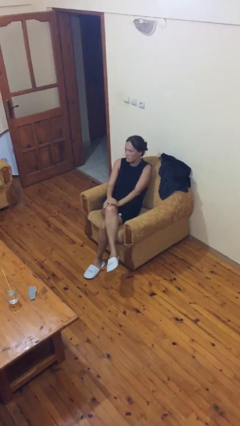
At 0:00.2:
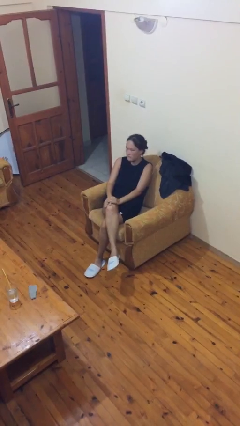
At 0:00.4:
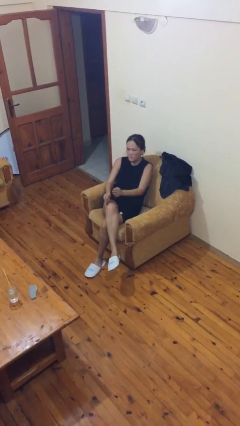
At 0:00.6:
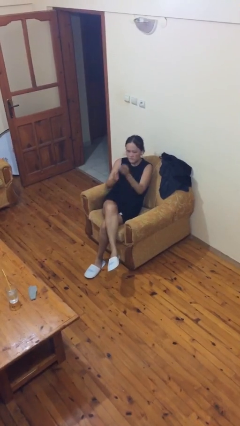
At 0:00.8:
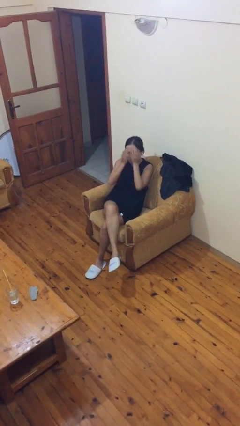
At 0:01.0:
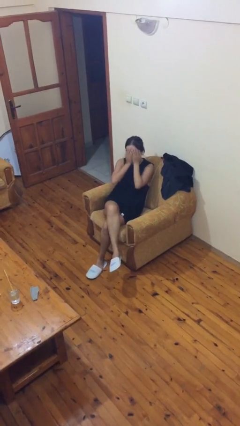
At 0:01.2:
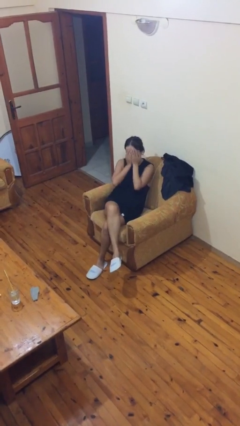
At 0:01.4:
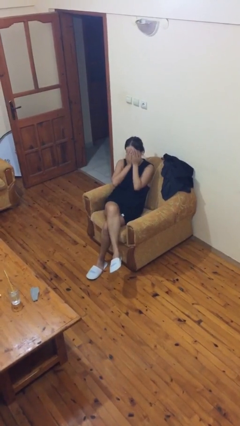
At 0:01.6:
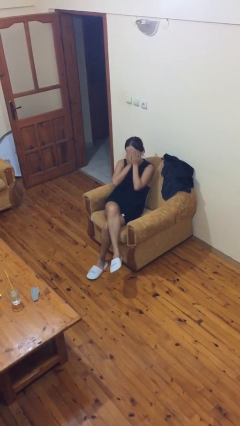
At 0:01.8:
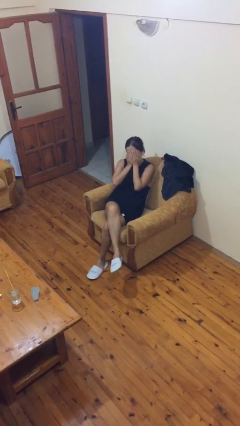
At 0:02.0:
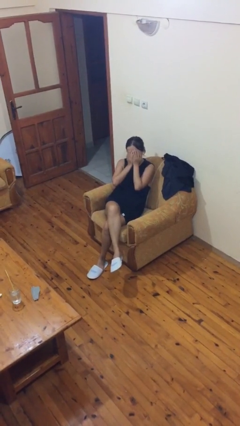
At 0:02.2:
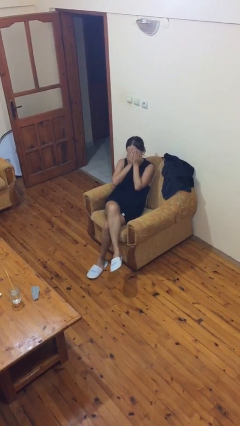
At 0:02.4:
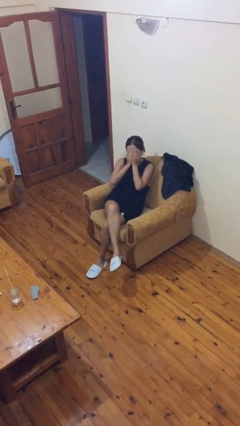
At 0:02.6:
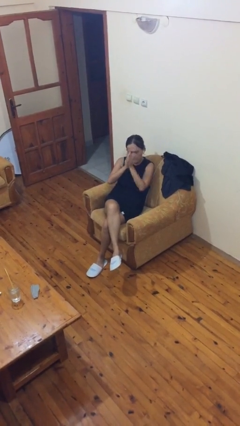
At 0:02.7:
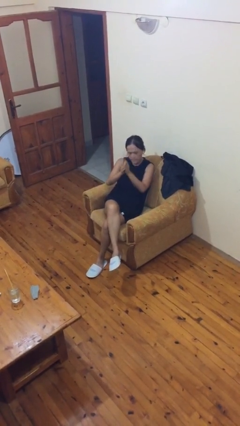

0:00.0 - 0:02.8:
person covers face with hands

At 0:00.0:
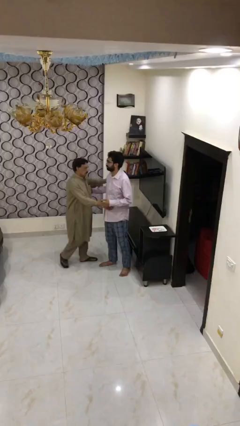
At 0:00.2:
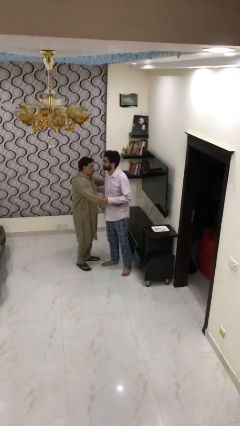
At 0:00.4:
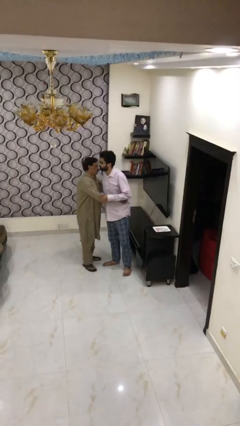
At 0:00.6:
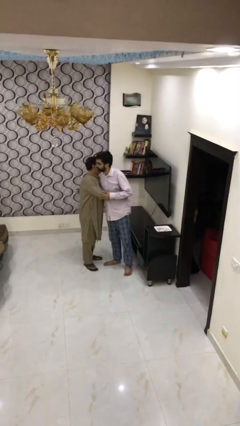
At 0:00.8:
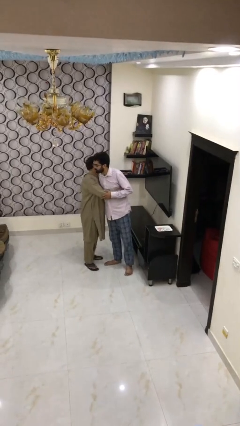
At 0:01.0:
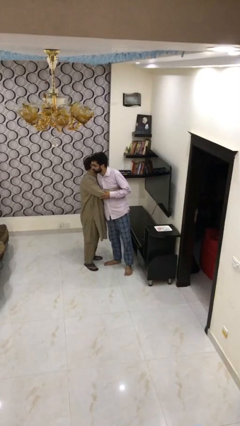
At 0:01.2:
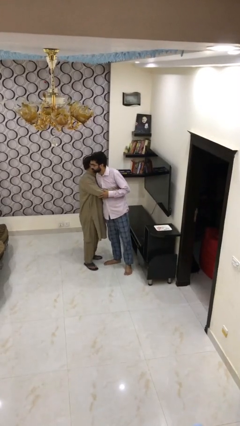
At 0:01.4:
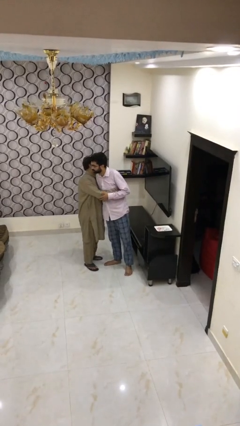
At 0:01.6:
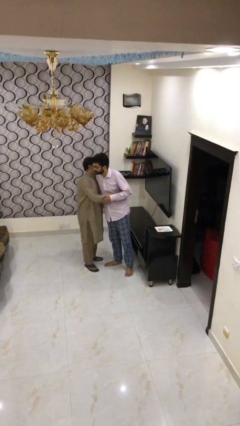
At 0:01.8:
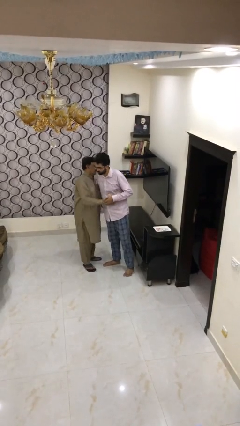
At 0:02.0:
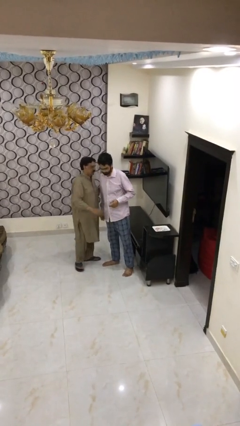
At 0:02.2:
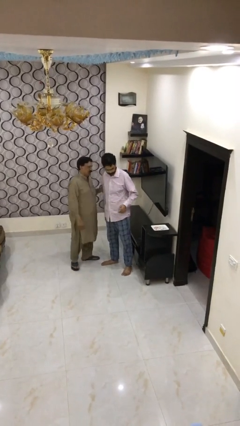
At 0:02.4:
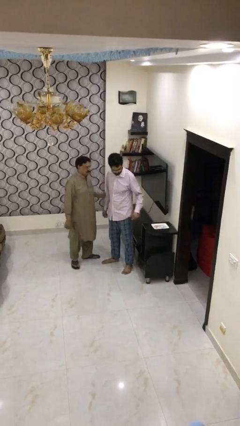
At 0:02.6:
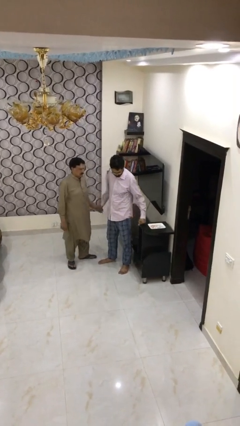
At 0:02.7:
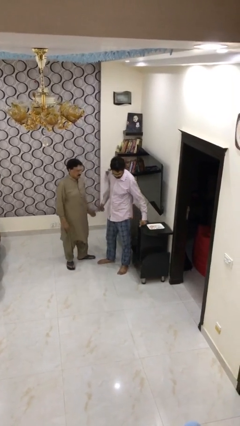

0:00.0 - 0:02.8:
person embraces person

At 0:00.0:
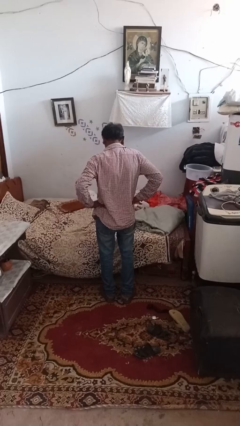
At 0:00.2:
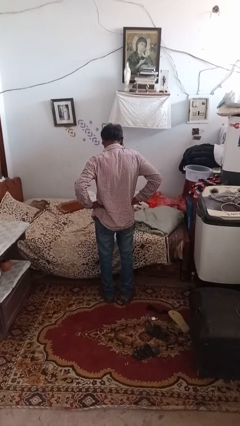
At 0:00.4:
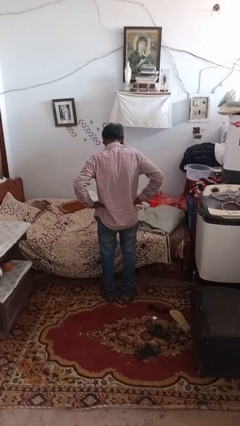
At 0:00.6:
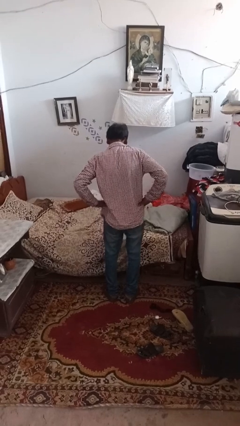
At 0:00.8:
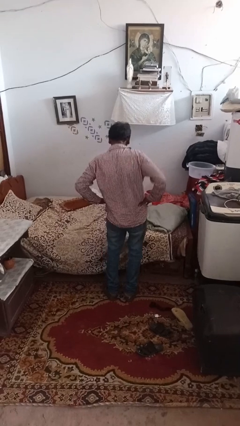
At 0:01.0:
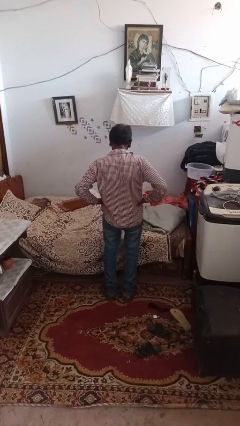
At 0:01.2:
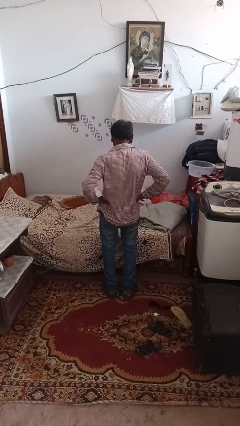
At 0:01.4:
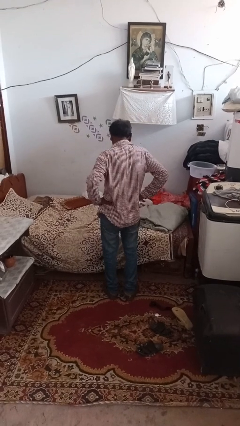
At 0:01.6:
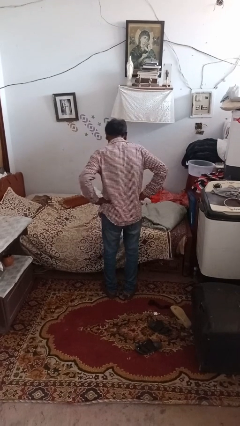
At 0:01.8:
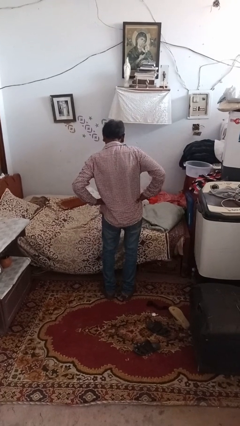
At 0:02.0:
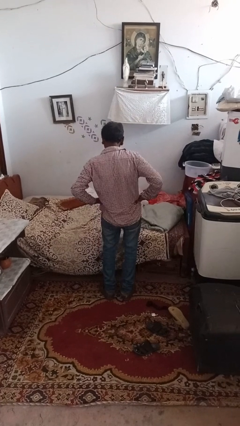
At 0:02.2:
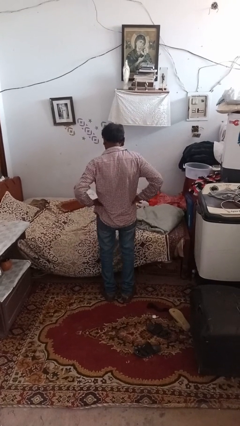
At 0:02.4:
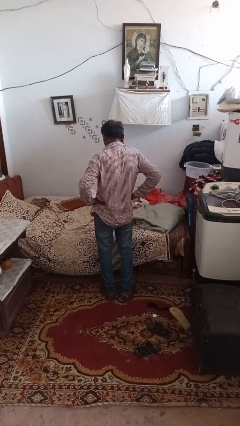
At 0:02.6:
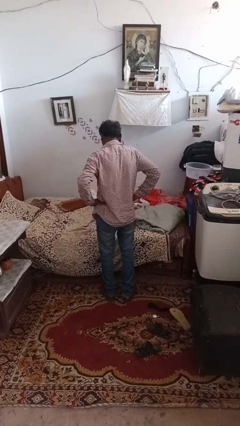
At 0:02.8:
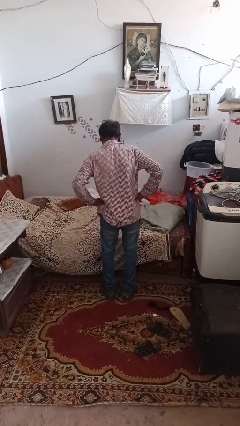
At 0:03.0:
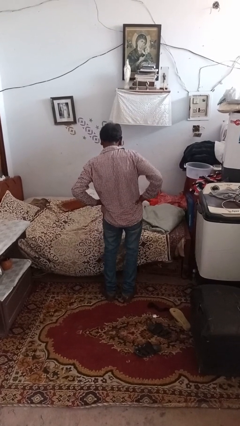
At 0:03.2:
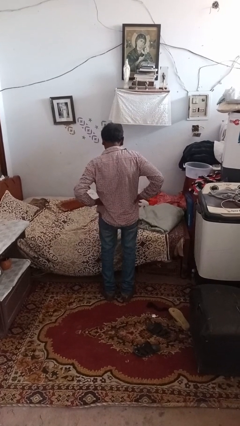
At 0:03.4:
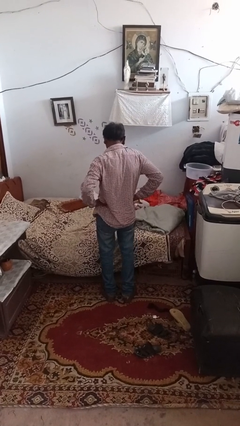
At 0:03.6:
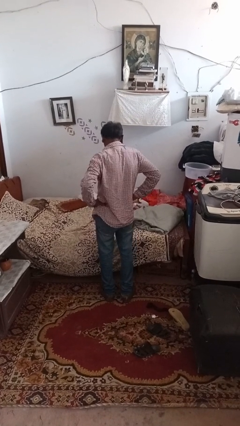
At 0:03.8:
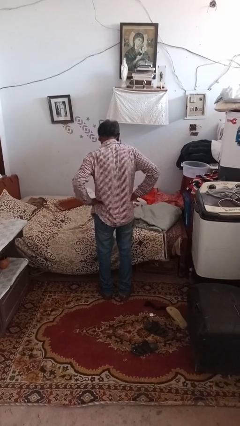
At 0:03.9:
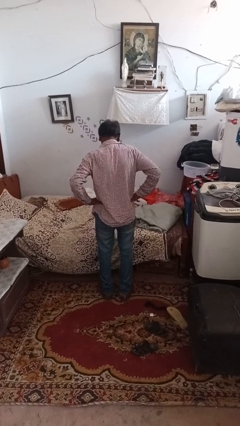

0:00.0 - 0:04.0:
person wiggles hips

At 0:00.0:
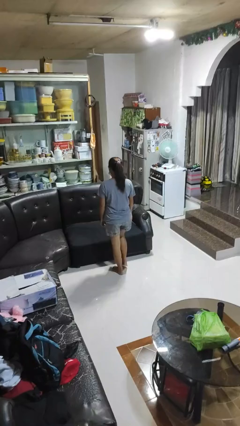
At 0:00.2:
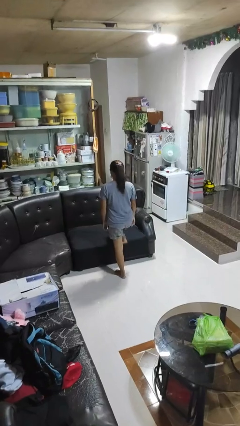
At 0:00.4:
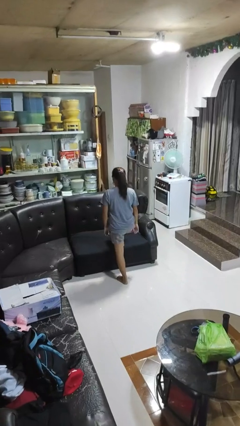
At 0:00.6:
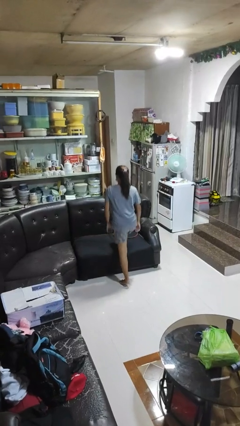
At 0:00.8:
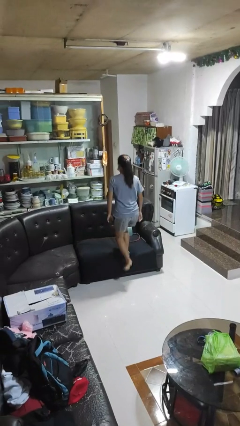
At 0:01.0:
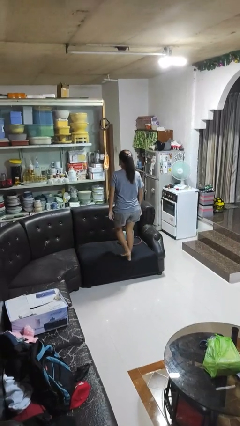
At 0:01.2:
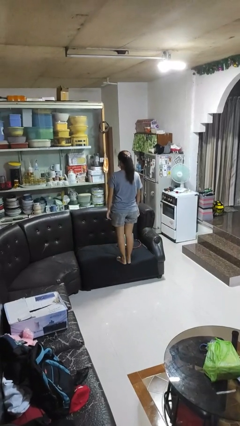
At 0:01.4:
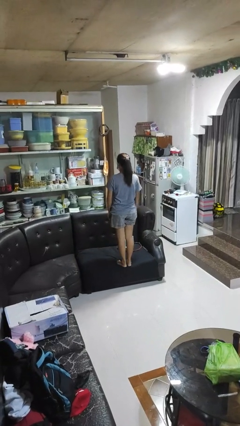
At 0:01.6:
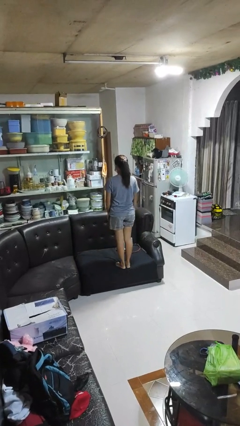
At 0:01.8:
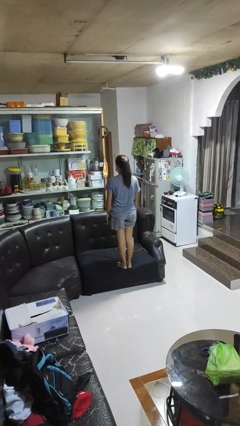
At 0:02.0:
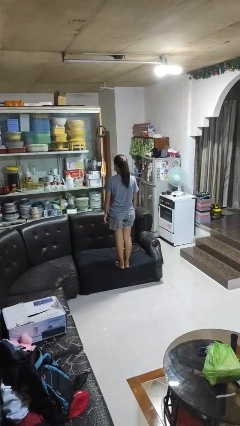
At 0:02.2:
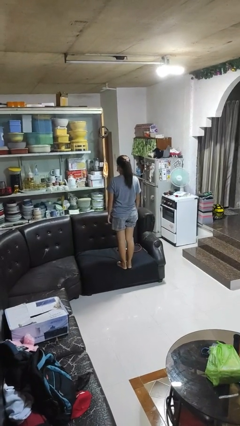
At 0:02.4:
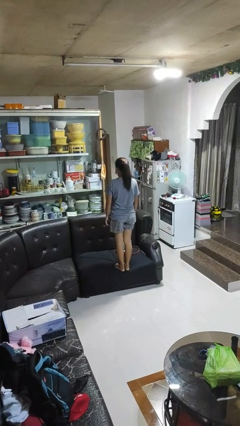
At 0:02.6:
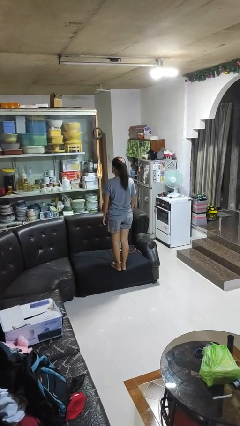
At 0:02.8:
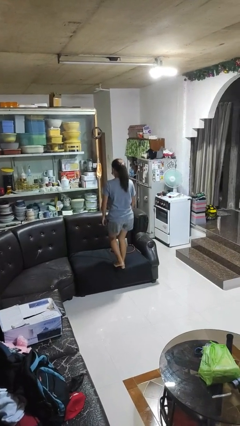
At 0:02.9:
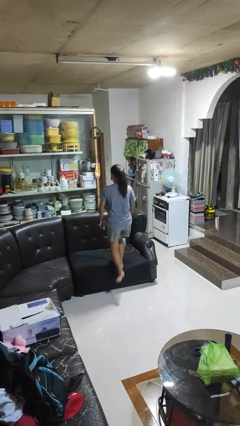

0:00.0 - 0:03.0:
person climbs on couch

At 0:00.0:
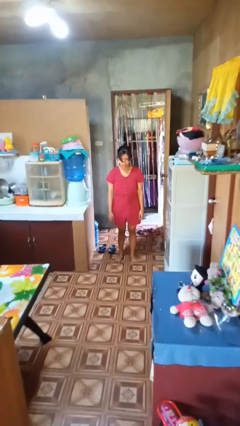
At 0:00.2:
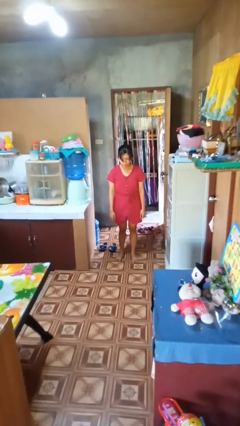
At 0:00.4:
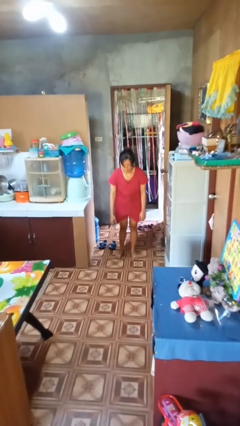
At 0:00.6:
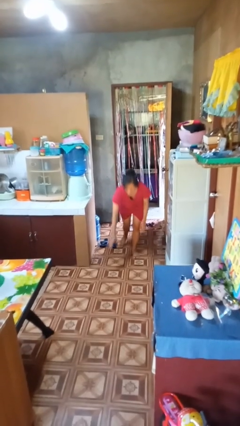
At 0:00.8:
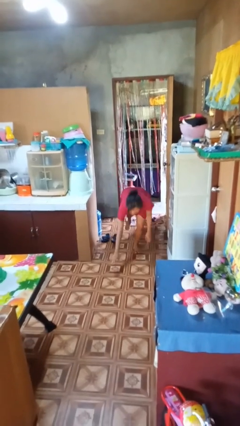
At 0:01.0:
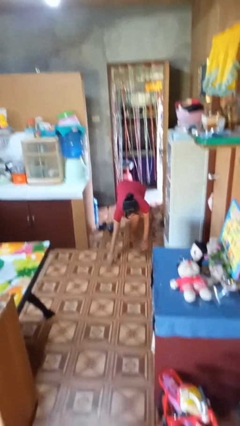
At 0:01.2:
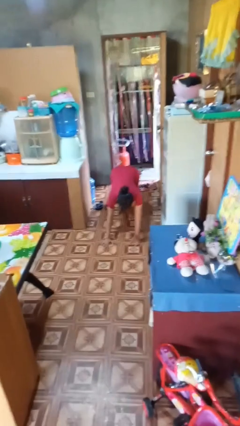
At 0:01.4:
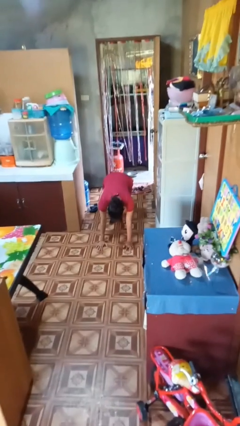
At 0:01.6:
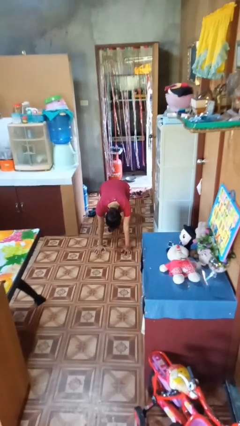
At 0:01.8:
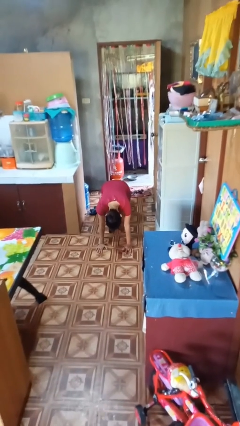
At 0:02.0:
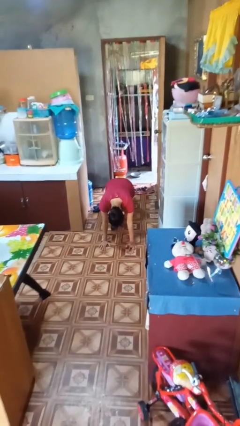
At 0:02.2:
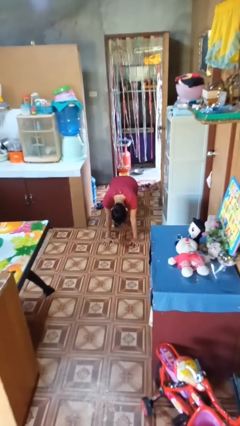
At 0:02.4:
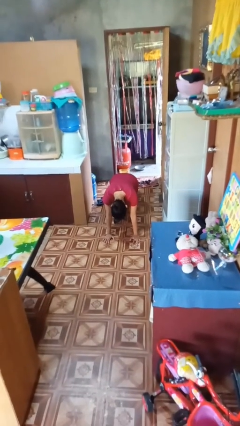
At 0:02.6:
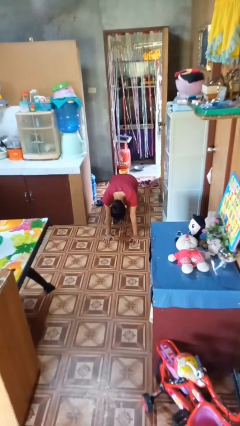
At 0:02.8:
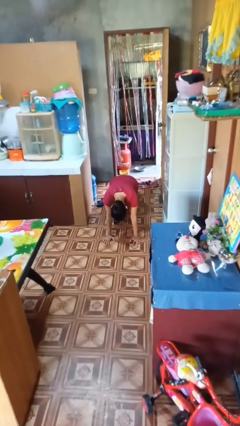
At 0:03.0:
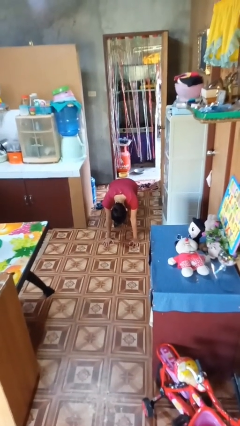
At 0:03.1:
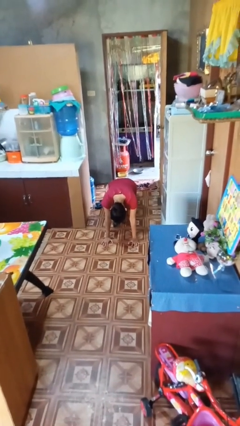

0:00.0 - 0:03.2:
person exercises with plank

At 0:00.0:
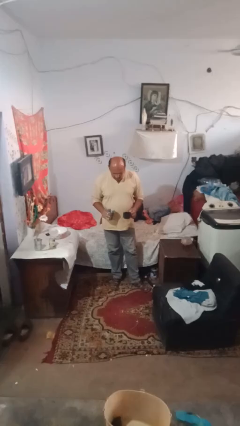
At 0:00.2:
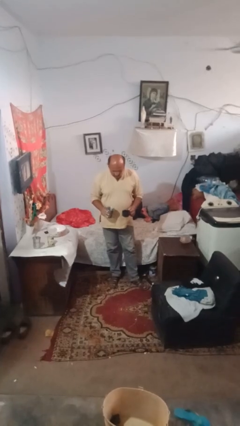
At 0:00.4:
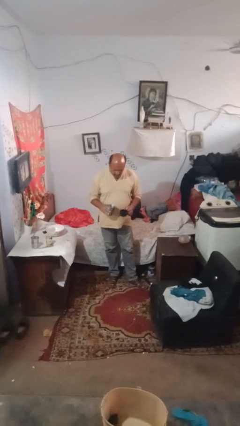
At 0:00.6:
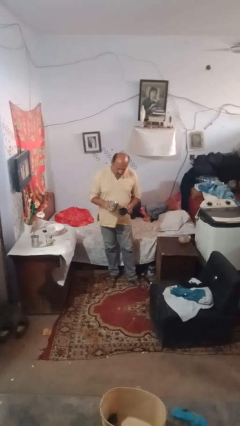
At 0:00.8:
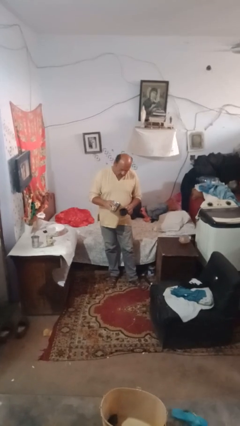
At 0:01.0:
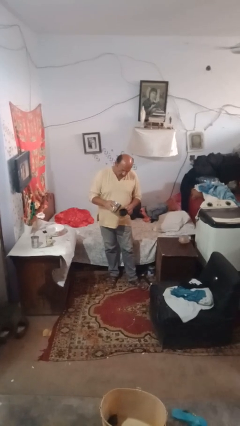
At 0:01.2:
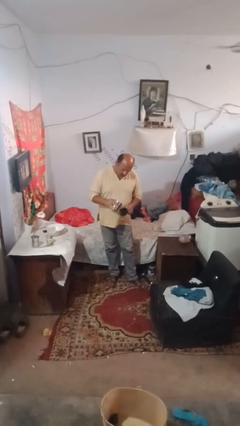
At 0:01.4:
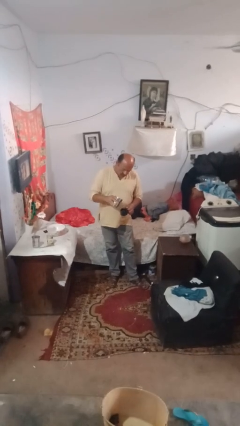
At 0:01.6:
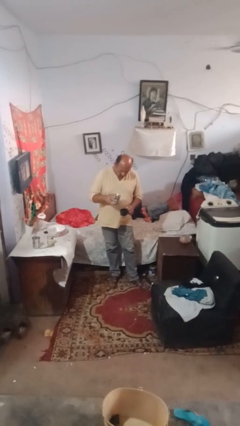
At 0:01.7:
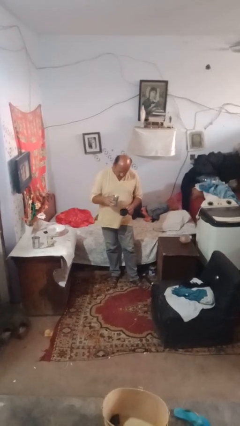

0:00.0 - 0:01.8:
person pours liquid into cup
